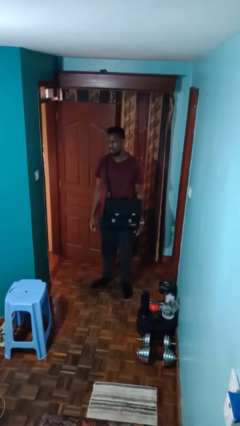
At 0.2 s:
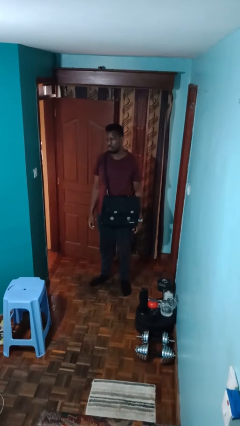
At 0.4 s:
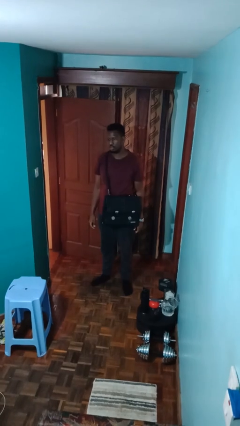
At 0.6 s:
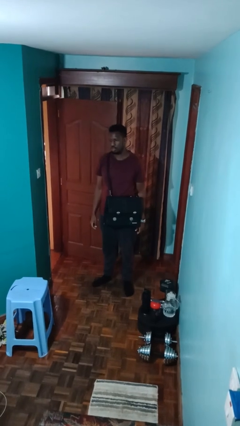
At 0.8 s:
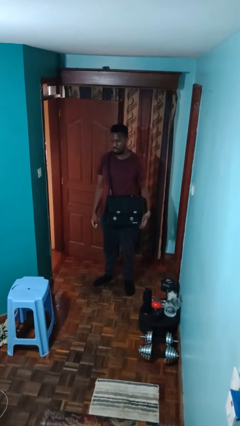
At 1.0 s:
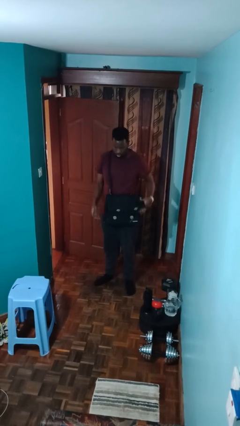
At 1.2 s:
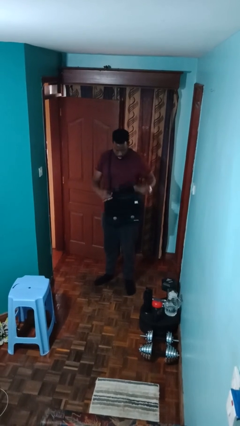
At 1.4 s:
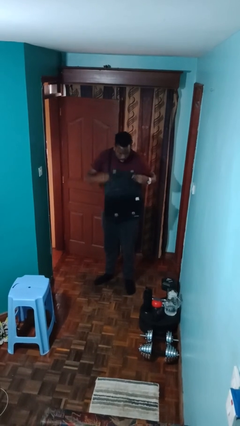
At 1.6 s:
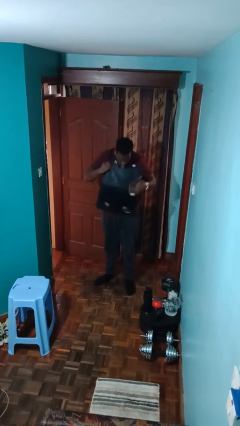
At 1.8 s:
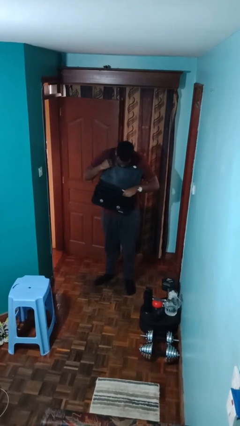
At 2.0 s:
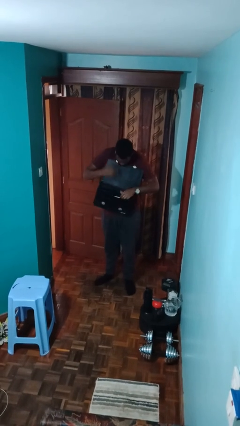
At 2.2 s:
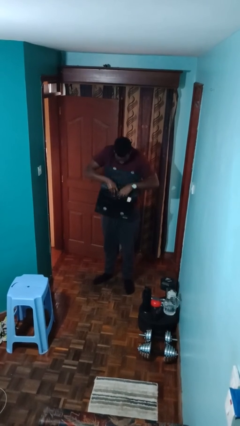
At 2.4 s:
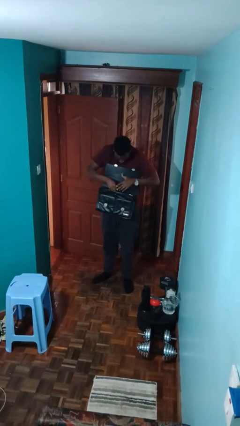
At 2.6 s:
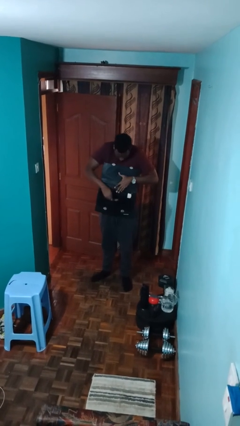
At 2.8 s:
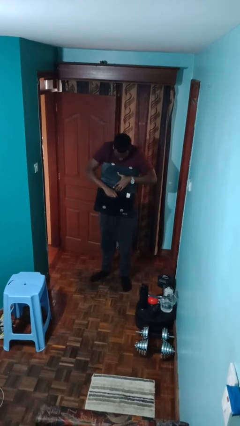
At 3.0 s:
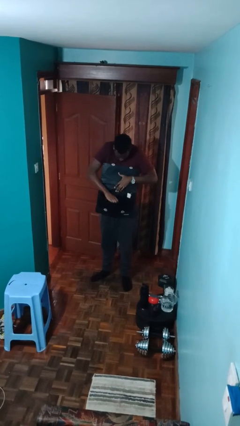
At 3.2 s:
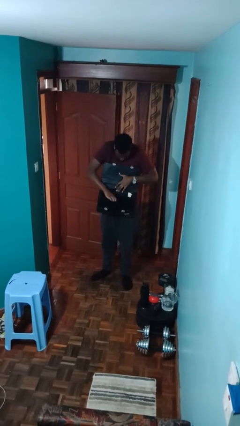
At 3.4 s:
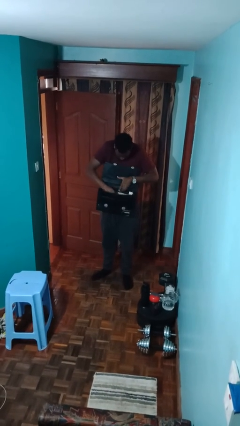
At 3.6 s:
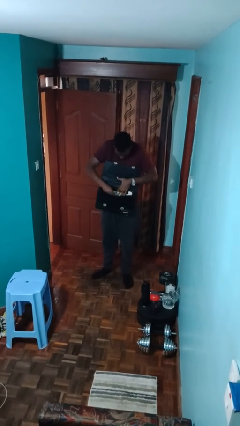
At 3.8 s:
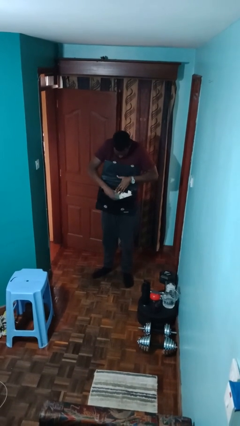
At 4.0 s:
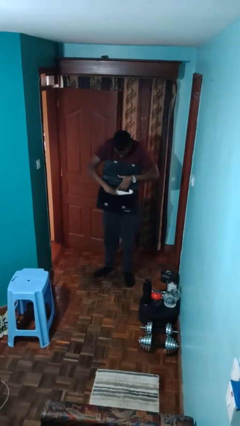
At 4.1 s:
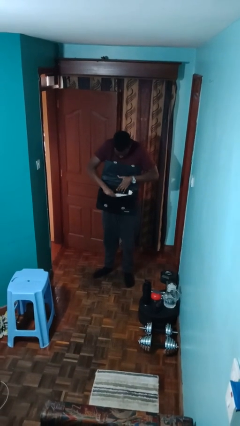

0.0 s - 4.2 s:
person searches in purse

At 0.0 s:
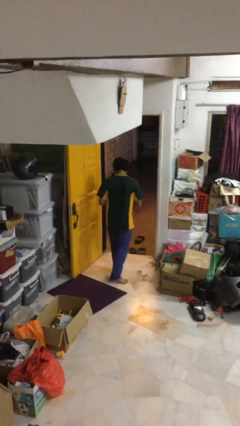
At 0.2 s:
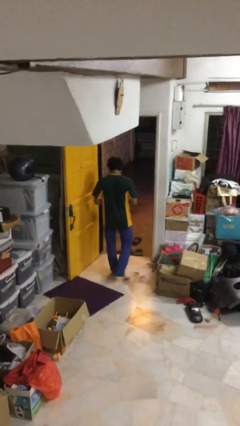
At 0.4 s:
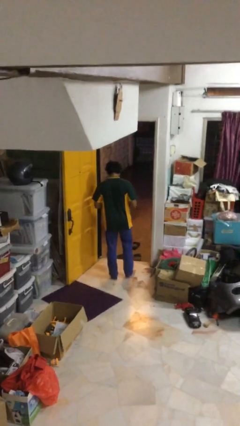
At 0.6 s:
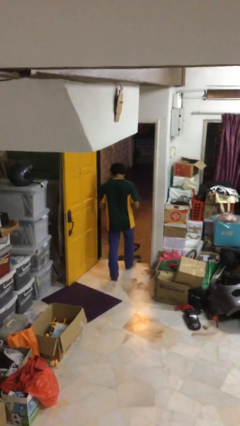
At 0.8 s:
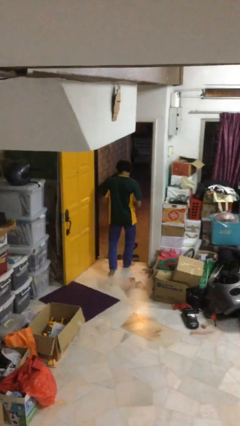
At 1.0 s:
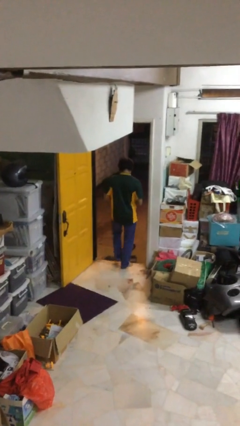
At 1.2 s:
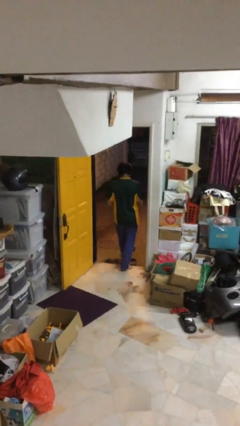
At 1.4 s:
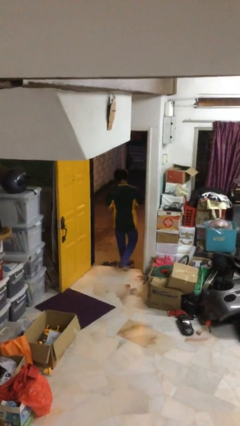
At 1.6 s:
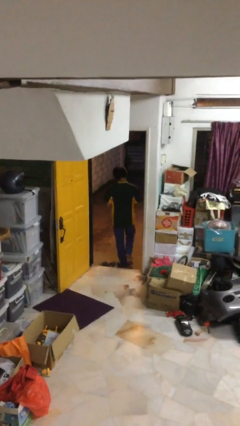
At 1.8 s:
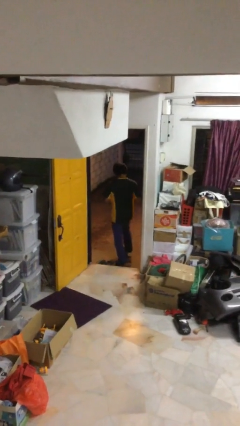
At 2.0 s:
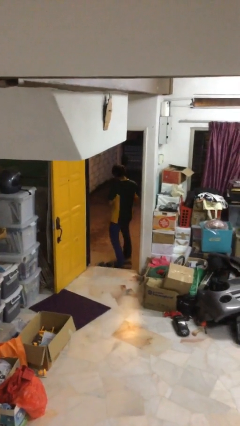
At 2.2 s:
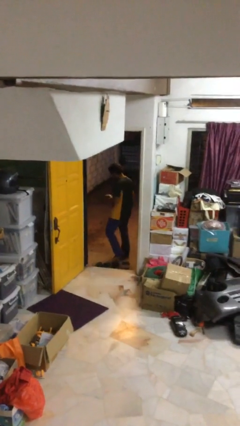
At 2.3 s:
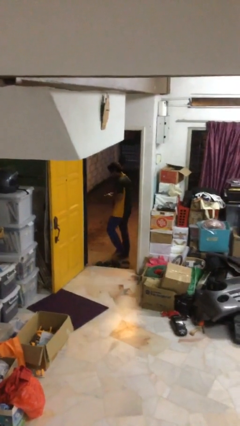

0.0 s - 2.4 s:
person exits scene through structure

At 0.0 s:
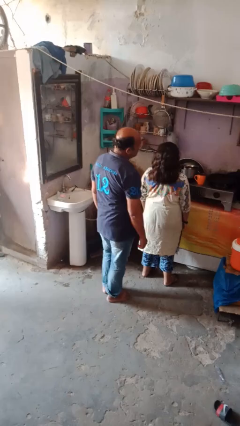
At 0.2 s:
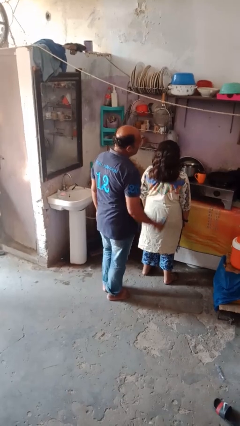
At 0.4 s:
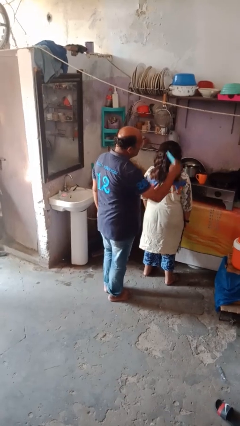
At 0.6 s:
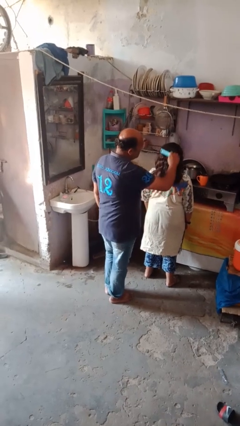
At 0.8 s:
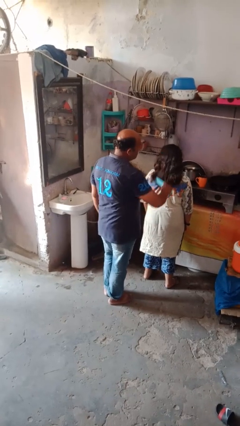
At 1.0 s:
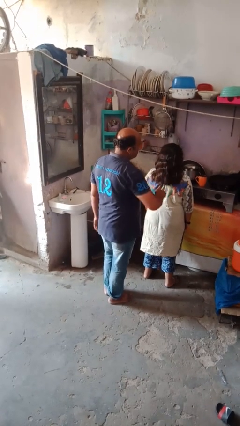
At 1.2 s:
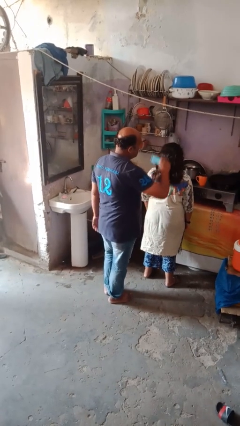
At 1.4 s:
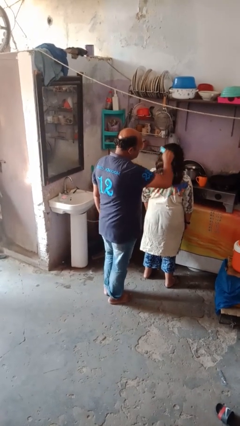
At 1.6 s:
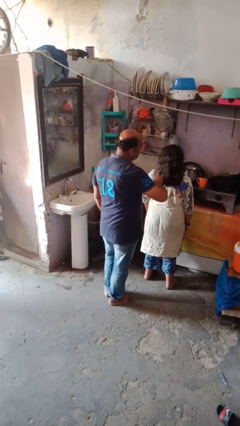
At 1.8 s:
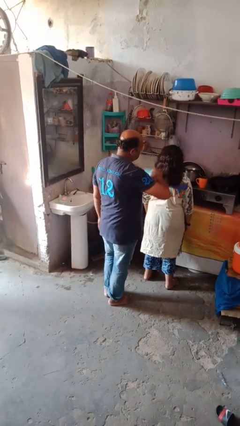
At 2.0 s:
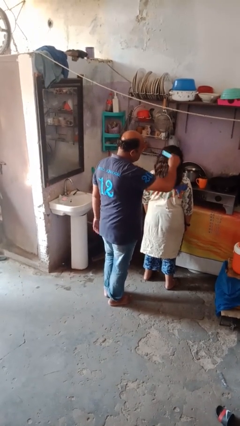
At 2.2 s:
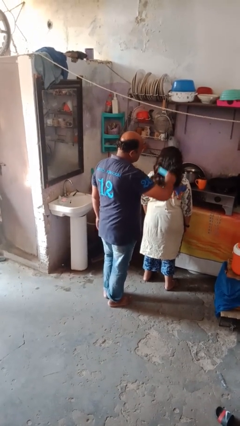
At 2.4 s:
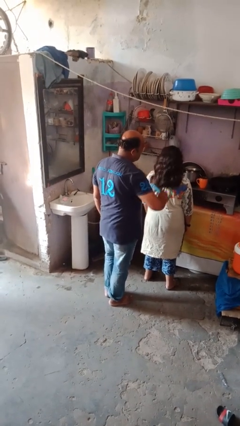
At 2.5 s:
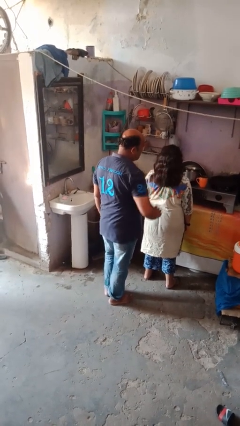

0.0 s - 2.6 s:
person brushes hair of person

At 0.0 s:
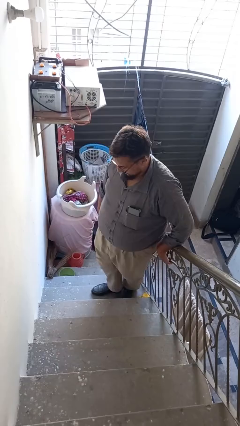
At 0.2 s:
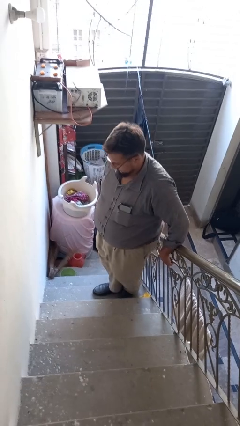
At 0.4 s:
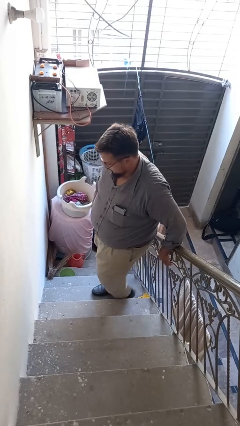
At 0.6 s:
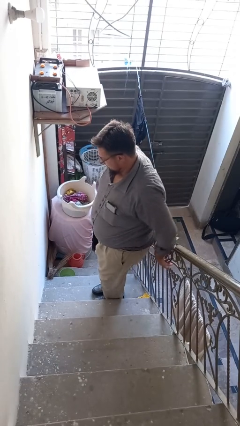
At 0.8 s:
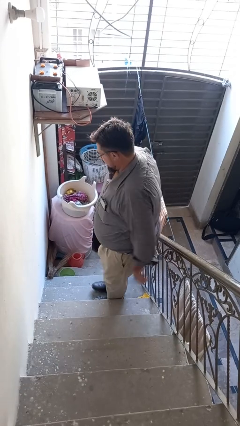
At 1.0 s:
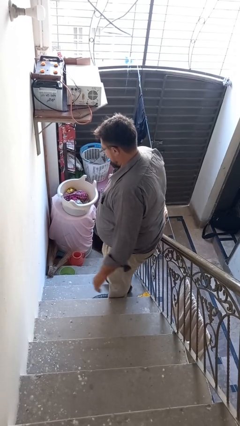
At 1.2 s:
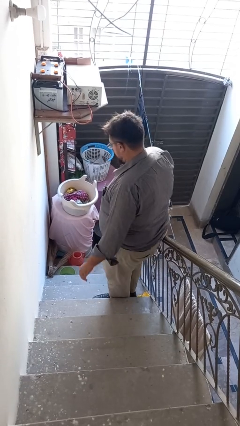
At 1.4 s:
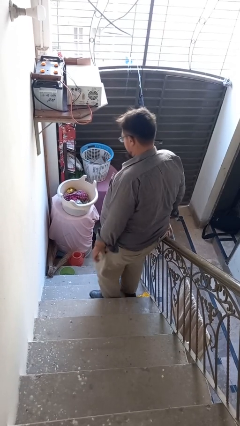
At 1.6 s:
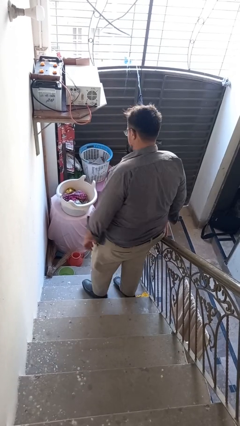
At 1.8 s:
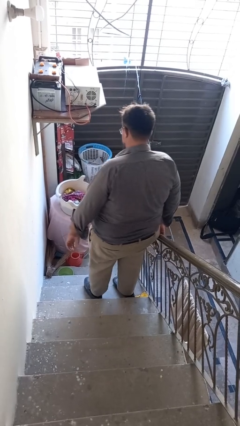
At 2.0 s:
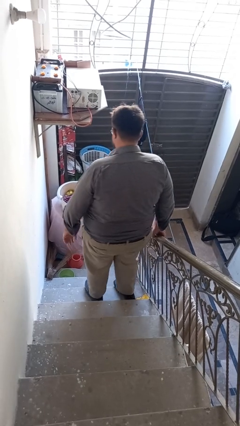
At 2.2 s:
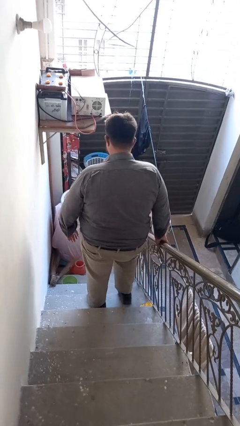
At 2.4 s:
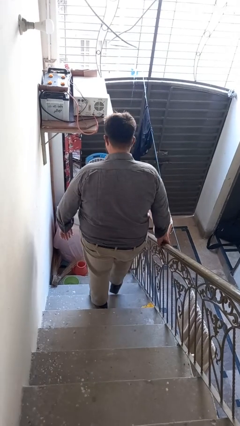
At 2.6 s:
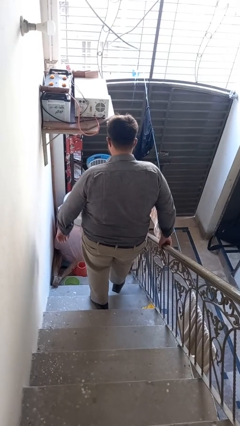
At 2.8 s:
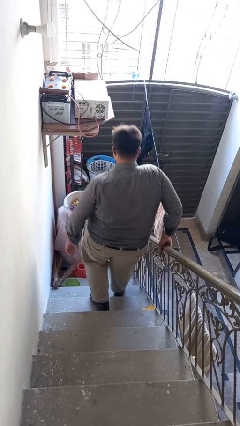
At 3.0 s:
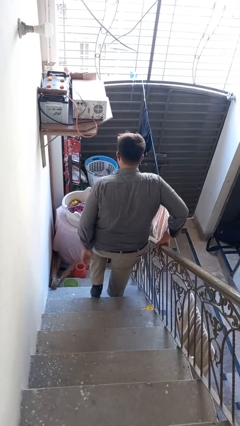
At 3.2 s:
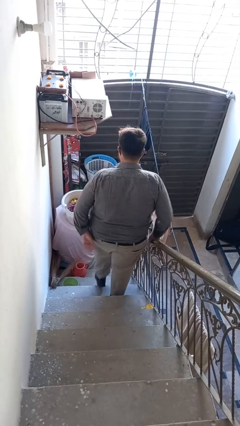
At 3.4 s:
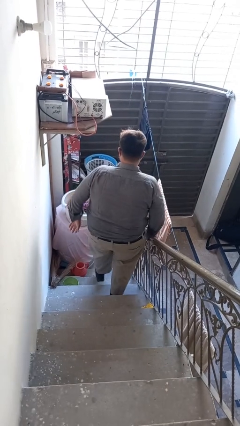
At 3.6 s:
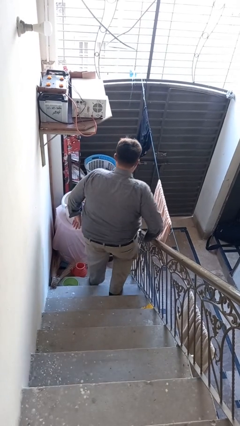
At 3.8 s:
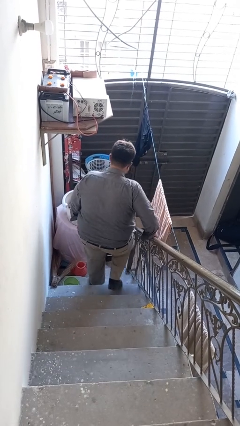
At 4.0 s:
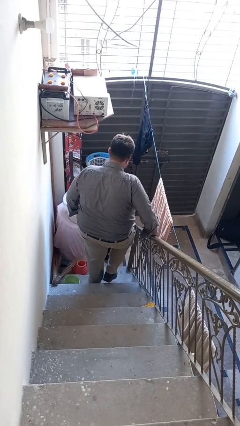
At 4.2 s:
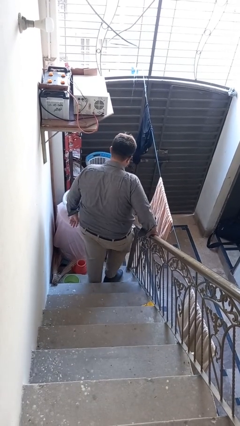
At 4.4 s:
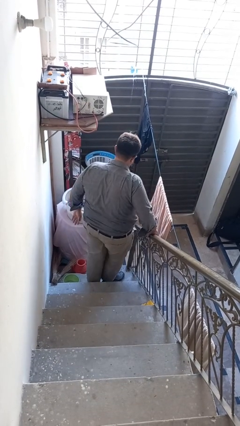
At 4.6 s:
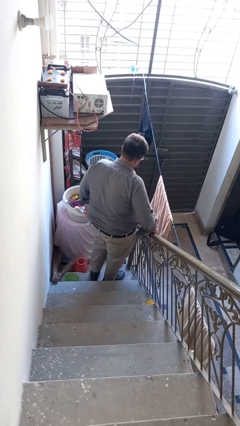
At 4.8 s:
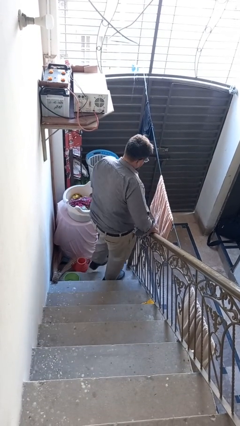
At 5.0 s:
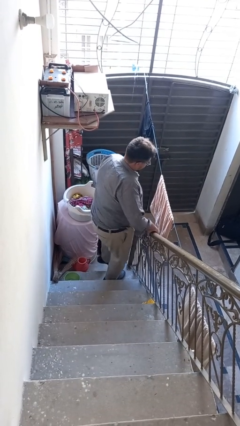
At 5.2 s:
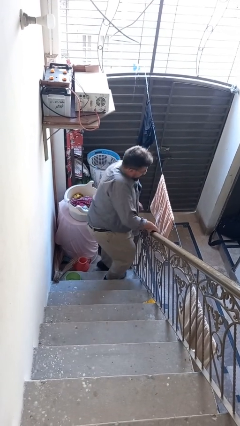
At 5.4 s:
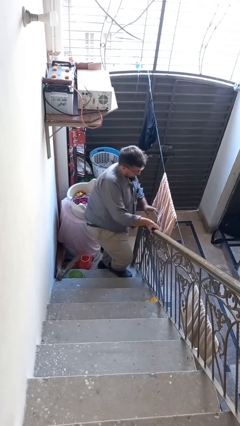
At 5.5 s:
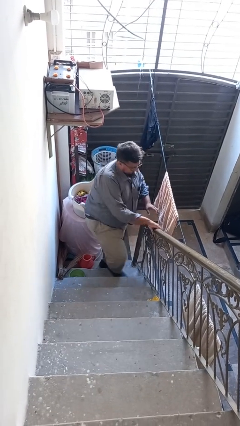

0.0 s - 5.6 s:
person climbs down stairs

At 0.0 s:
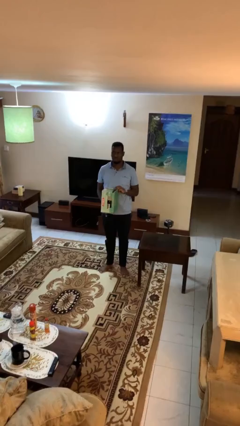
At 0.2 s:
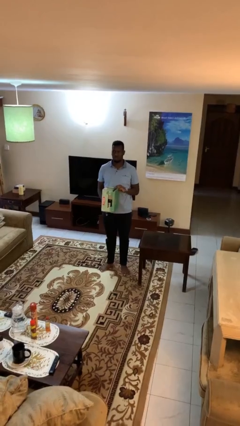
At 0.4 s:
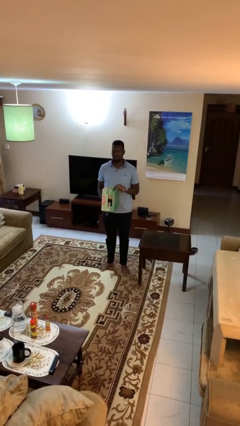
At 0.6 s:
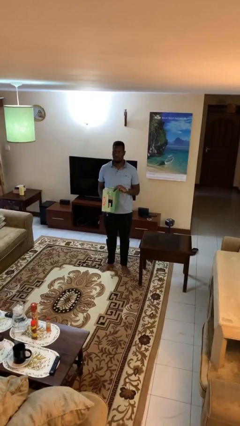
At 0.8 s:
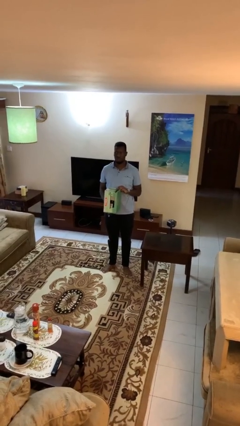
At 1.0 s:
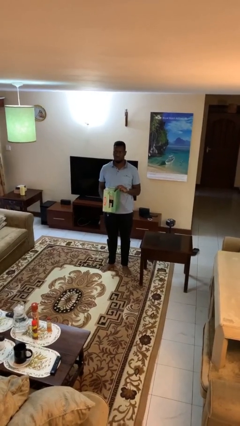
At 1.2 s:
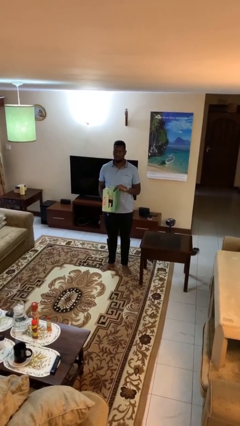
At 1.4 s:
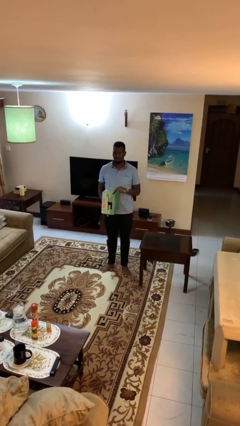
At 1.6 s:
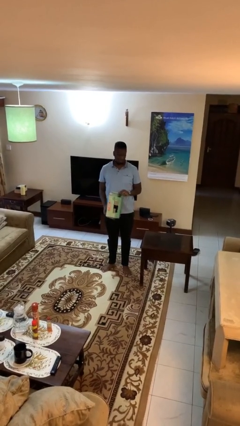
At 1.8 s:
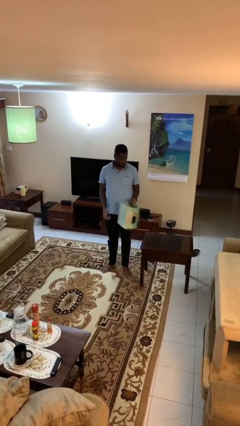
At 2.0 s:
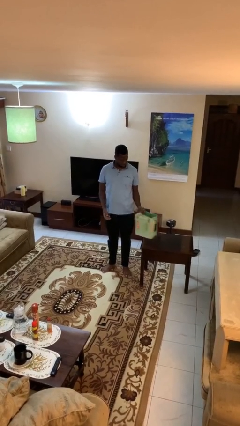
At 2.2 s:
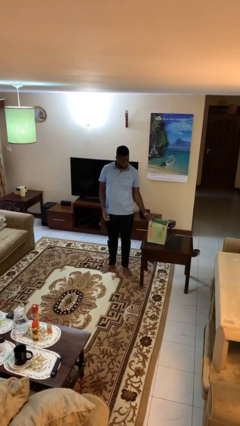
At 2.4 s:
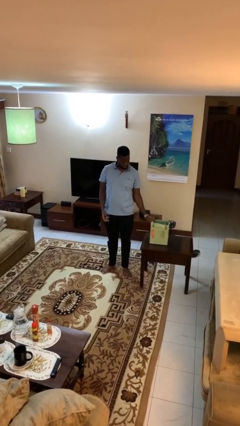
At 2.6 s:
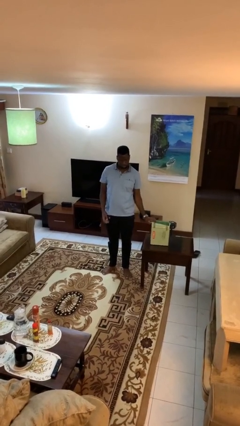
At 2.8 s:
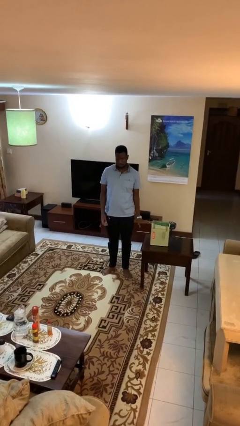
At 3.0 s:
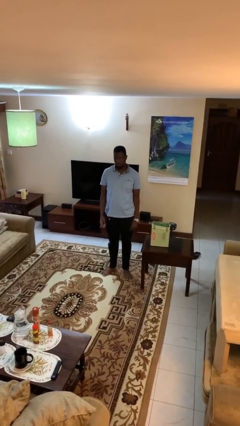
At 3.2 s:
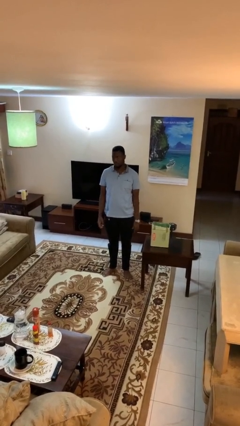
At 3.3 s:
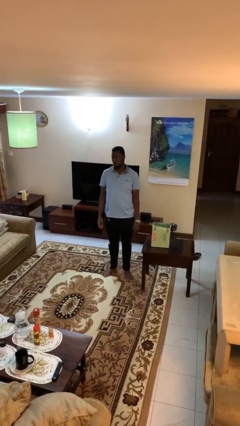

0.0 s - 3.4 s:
person puts down object on table
